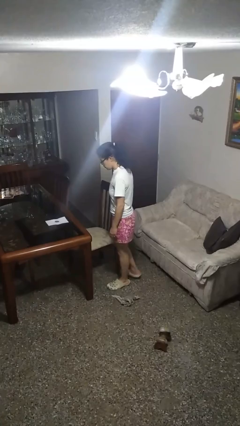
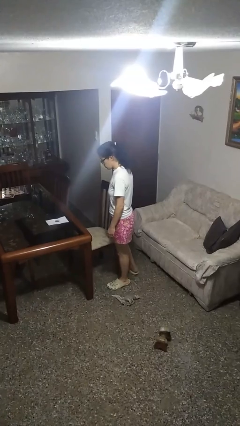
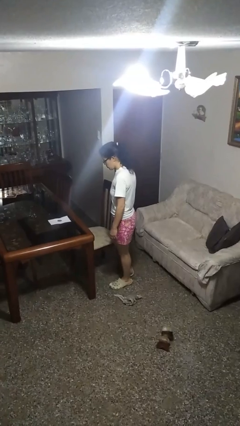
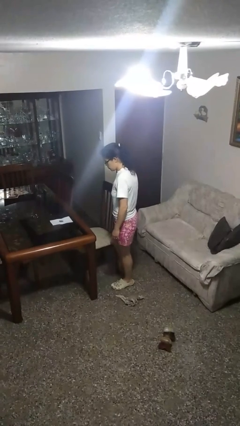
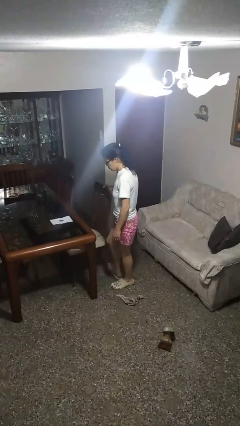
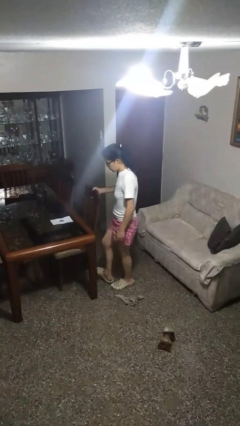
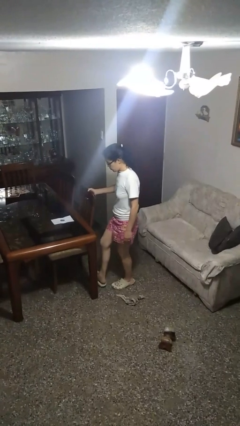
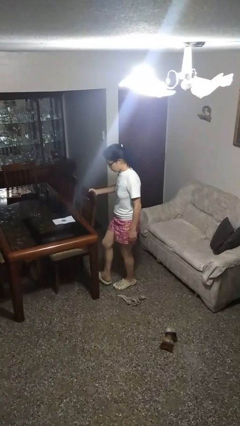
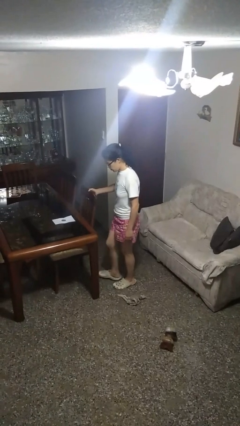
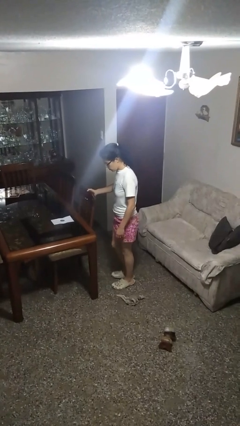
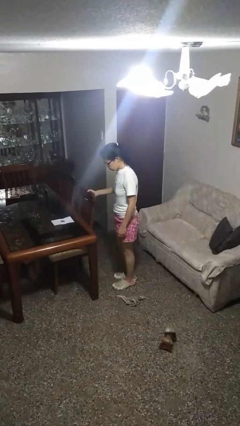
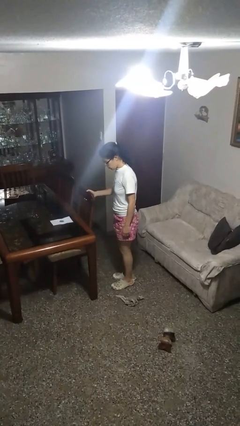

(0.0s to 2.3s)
person pushes in chair

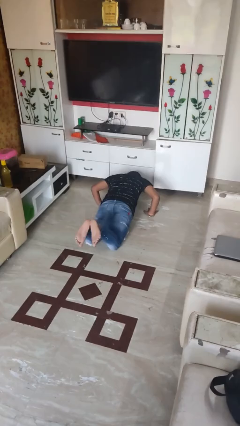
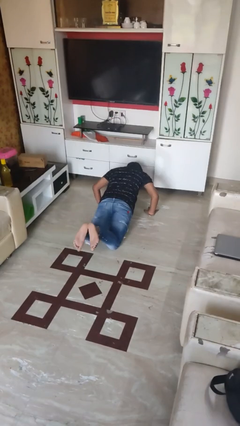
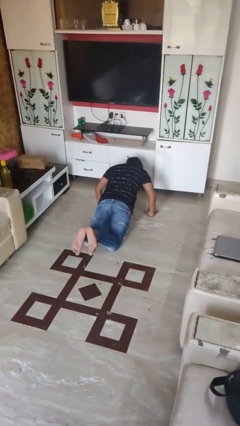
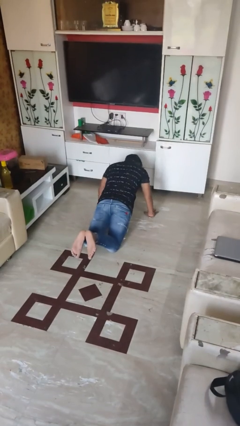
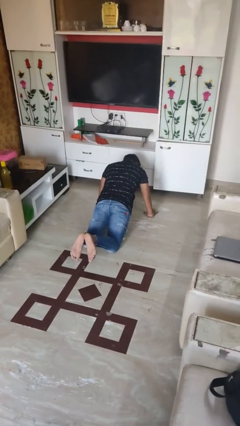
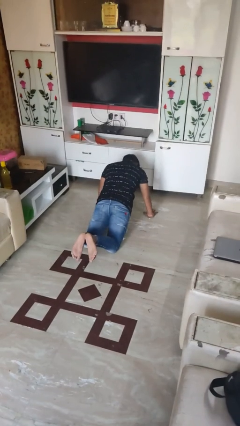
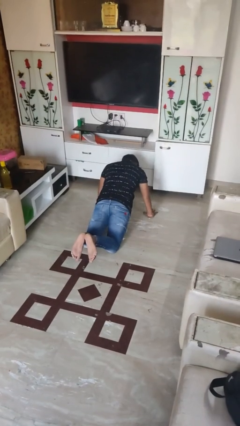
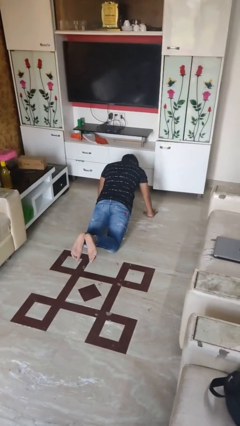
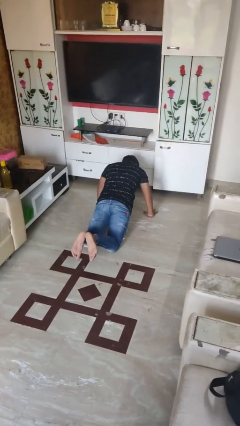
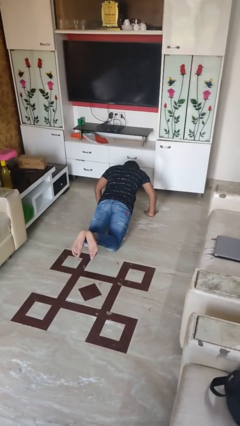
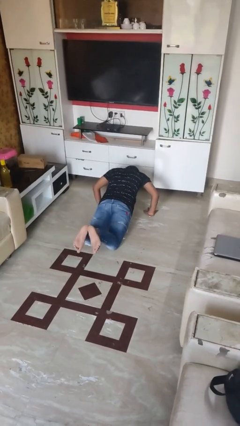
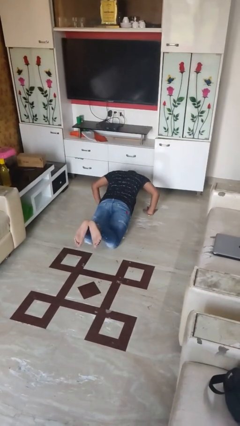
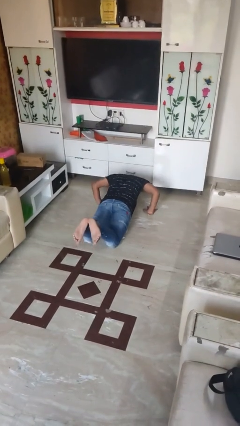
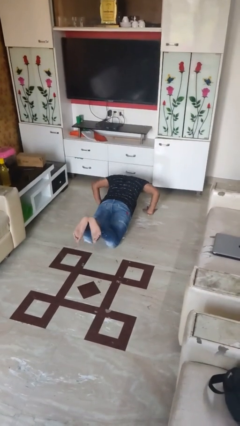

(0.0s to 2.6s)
person exercises with pushup

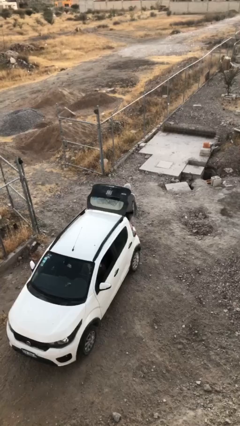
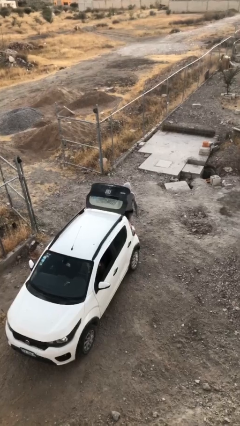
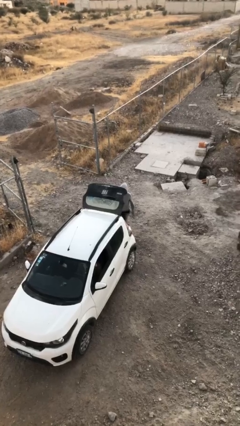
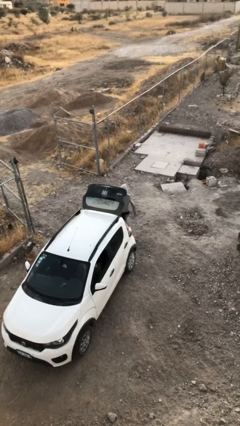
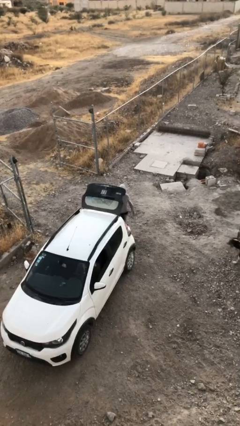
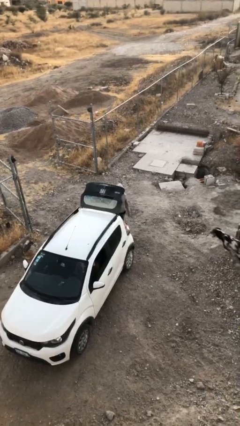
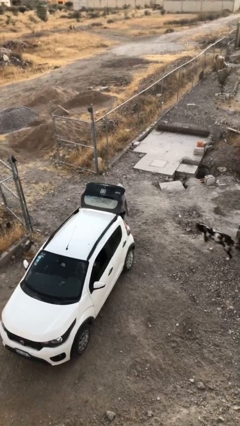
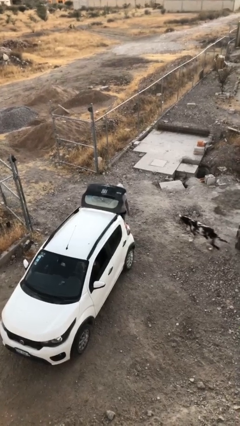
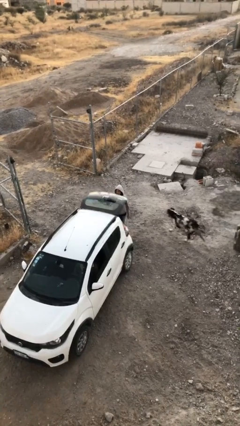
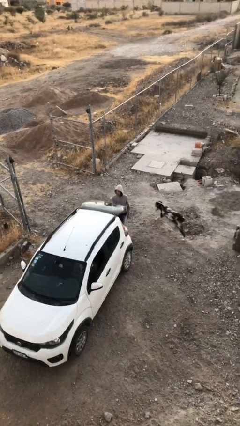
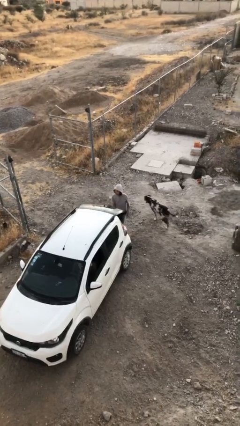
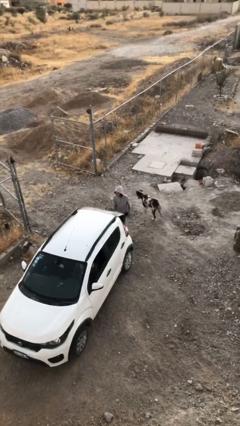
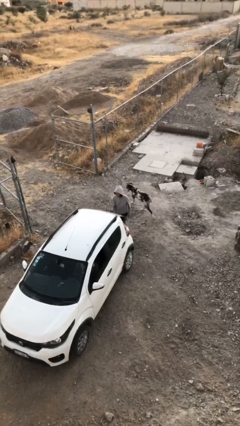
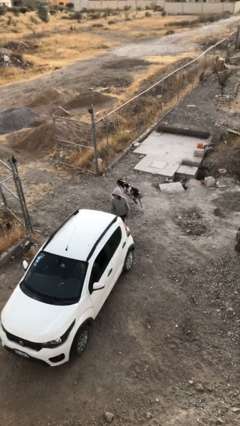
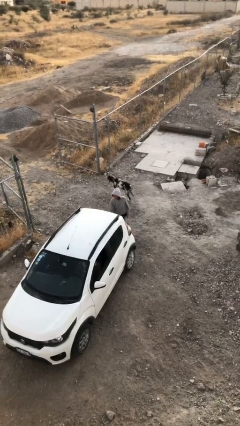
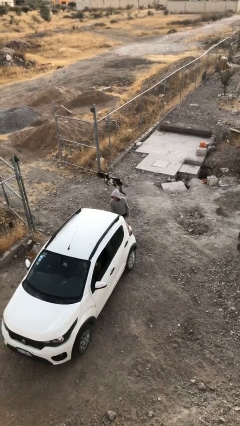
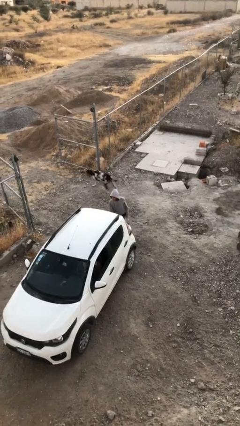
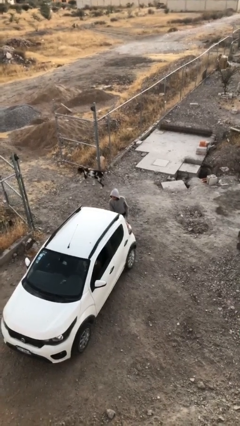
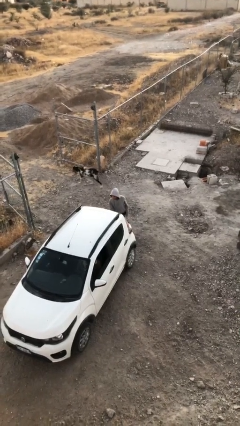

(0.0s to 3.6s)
person closes car trunk

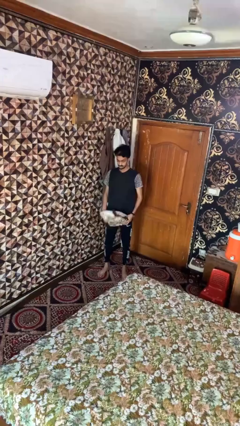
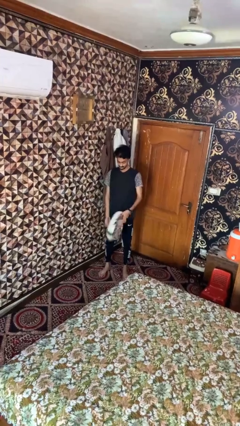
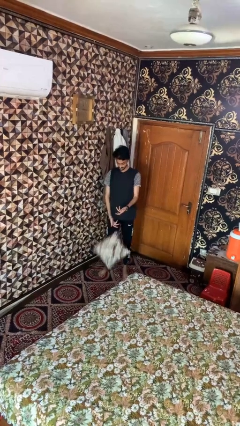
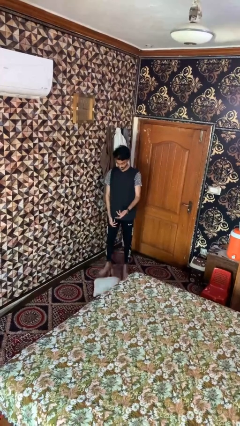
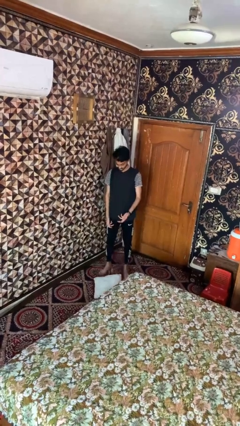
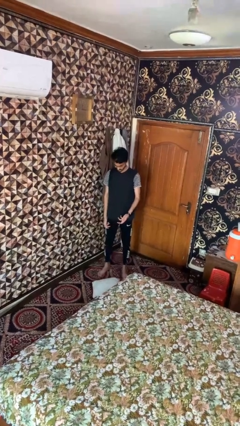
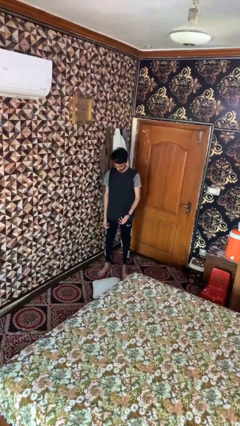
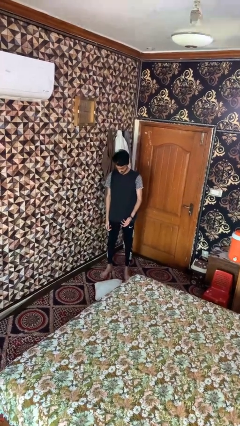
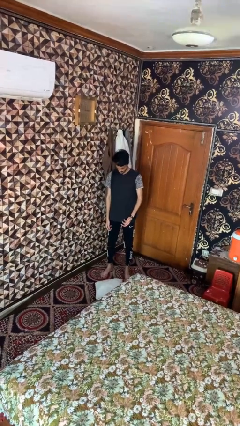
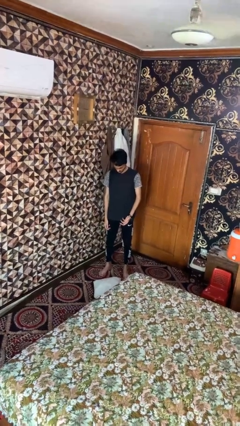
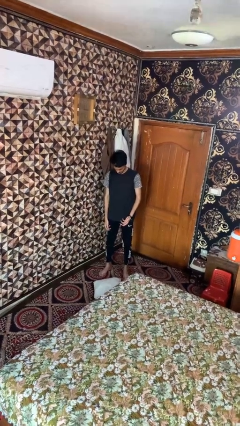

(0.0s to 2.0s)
person drops object

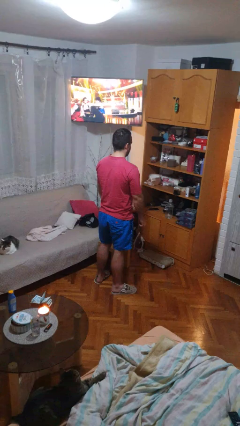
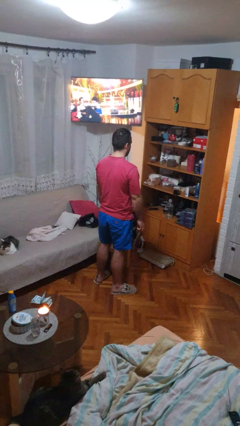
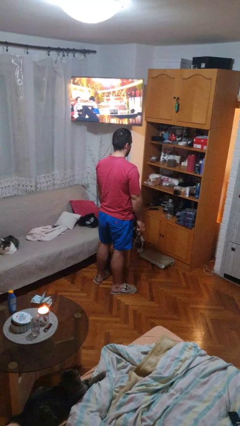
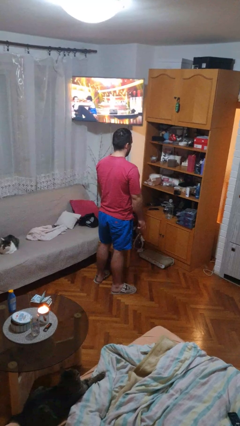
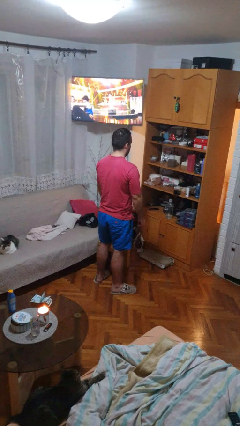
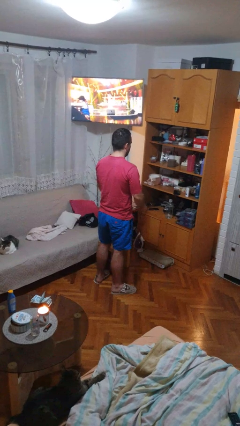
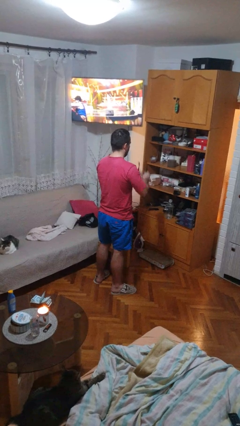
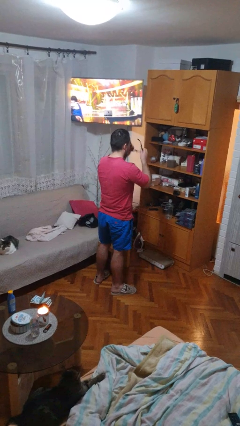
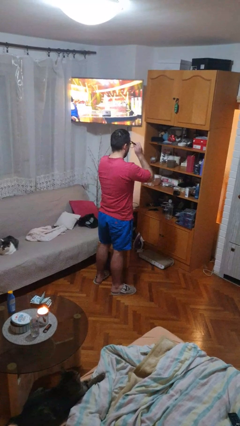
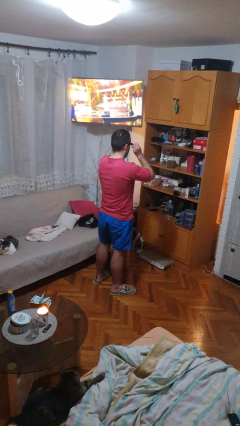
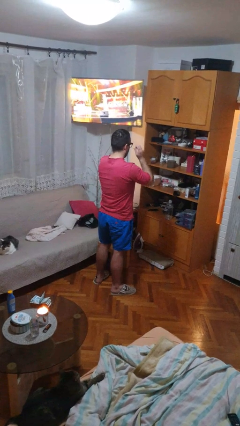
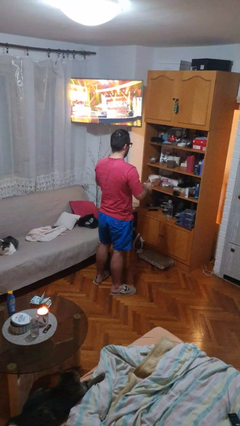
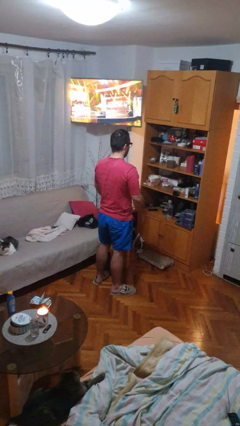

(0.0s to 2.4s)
person puts on glasses

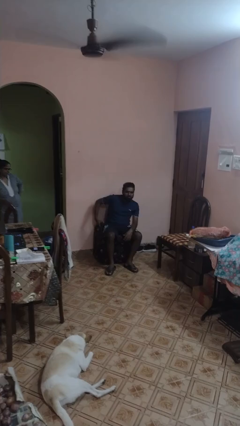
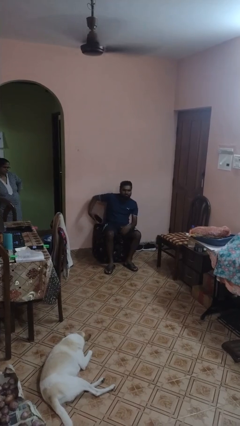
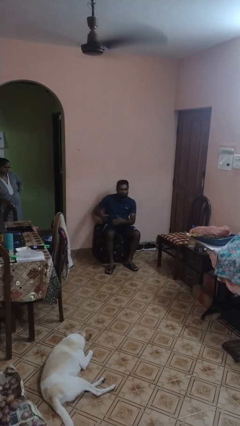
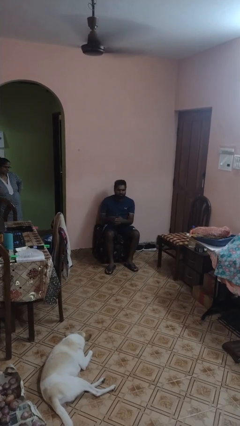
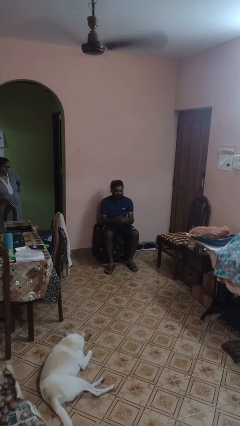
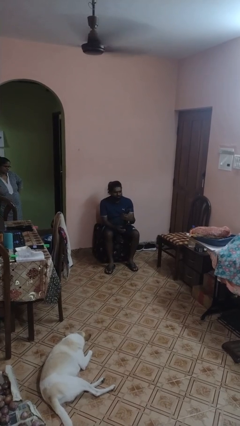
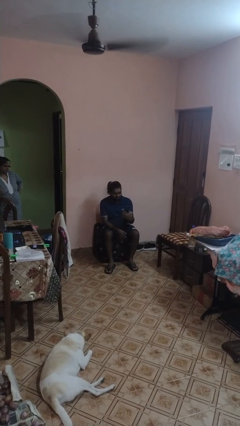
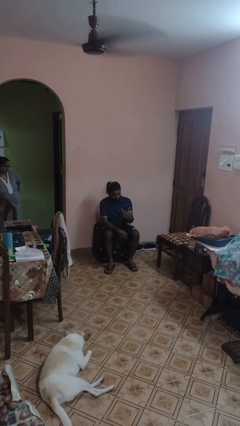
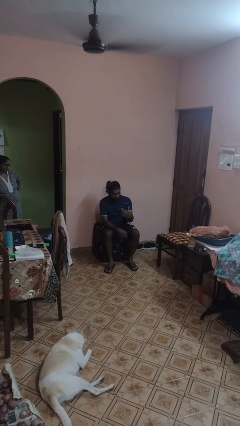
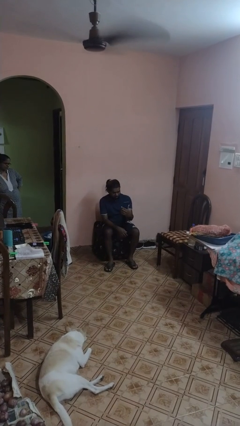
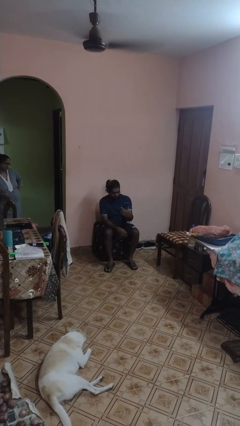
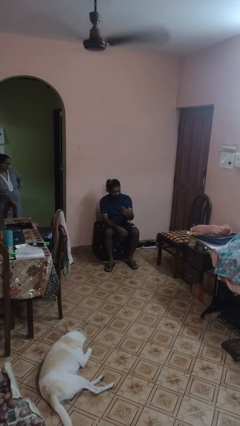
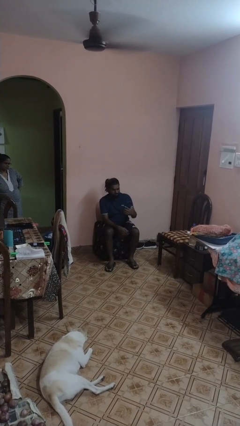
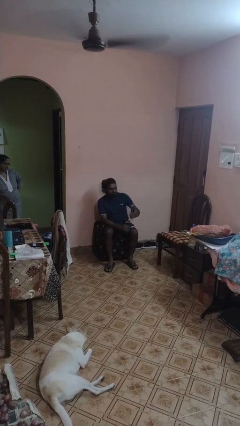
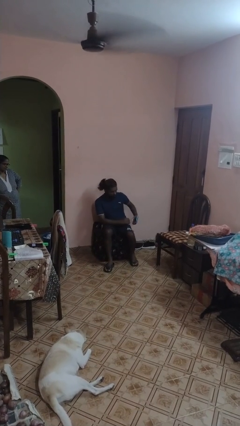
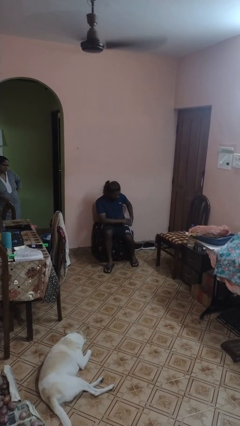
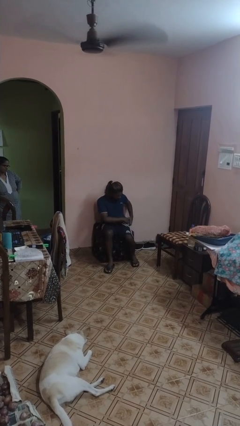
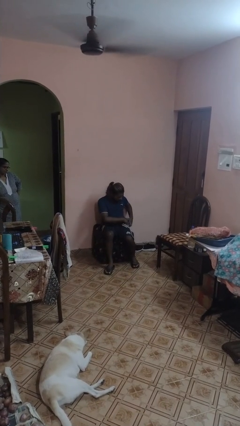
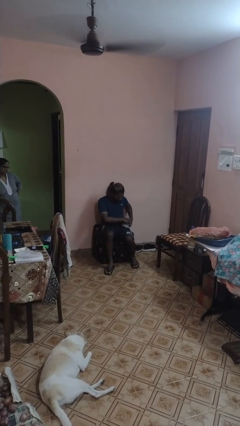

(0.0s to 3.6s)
person takes phone from pocket

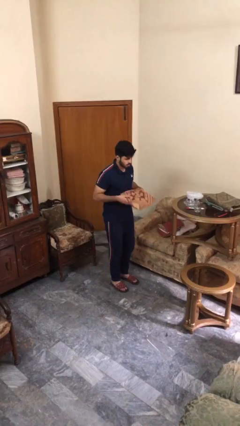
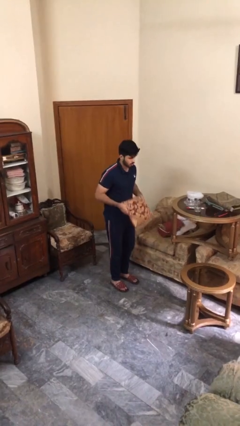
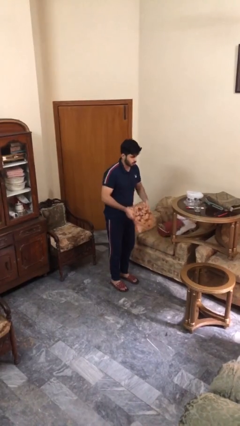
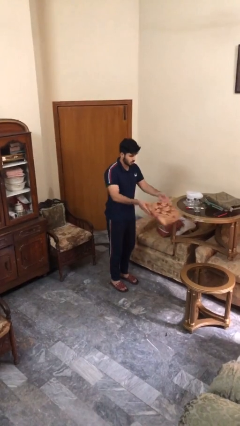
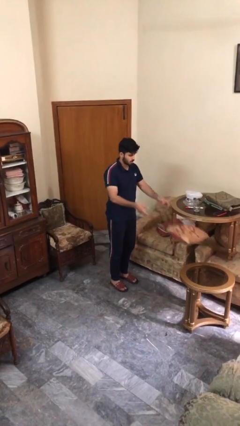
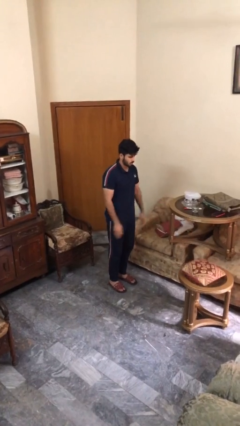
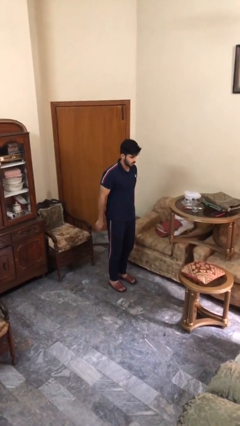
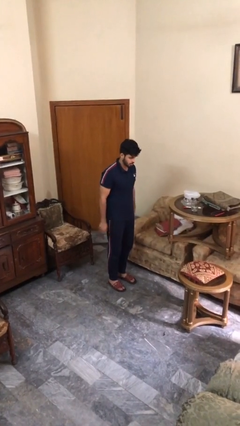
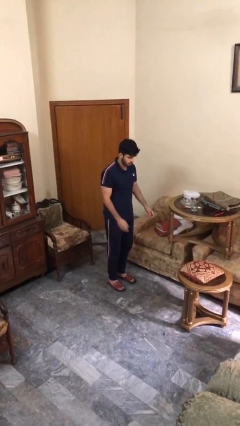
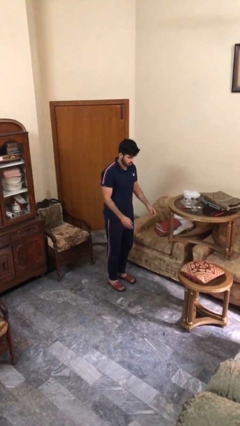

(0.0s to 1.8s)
person throws object on table
